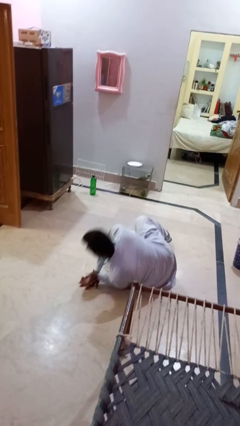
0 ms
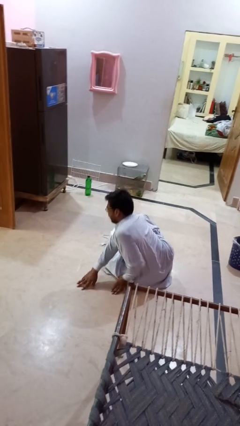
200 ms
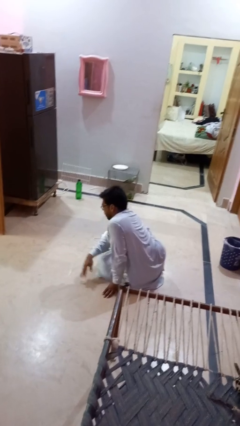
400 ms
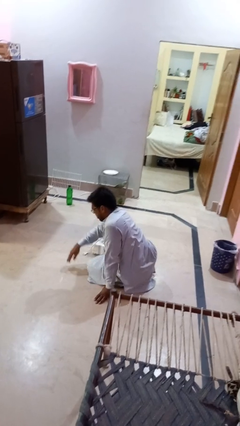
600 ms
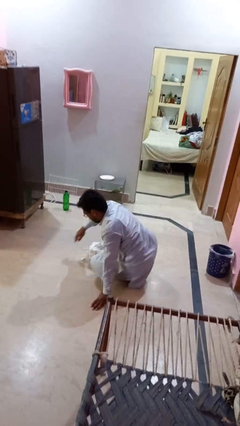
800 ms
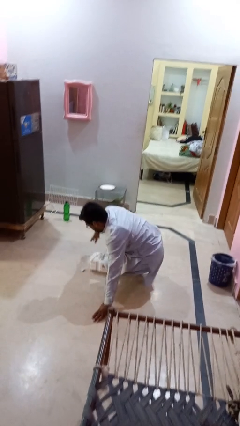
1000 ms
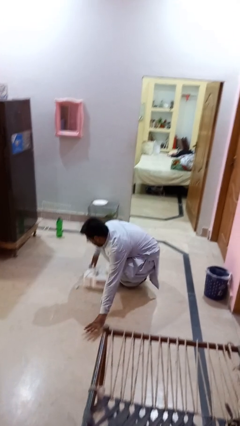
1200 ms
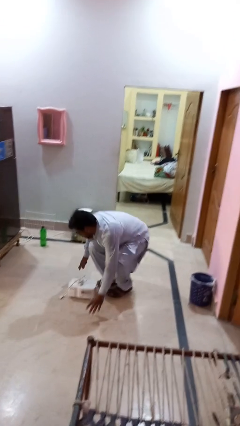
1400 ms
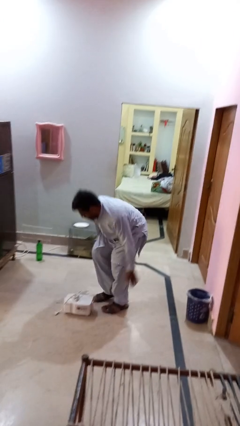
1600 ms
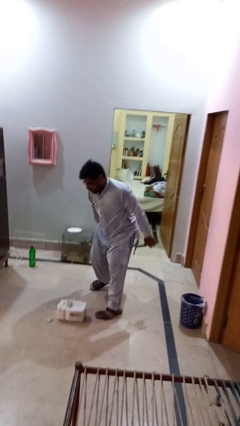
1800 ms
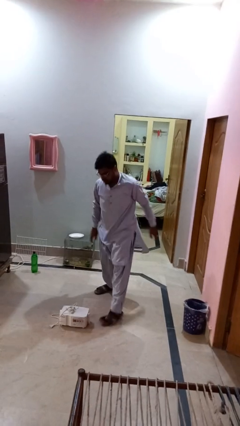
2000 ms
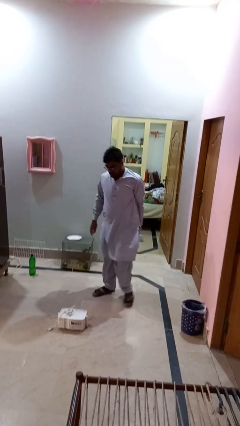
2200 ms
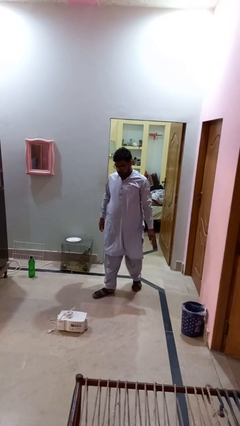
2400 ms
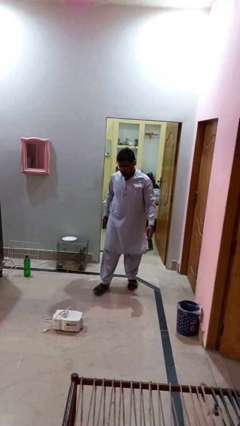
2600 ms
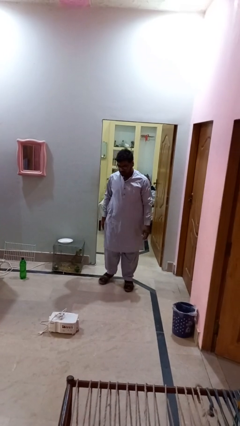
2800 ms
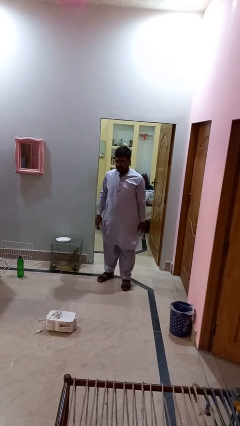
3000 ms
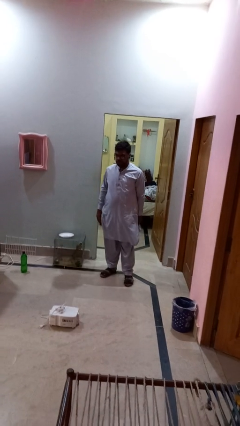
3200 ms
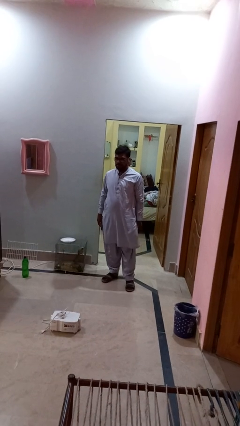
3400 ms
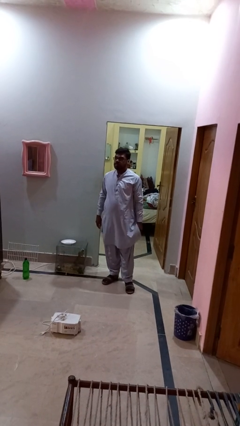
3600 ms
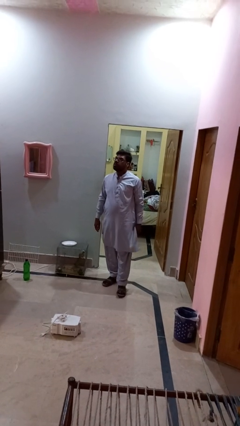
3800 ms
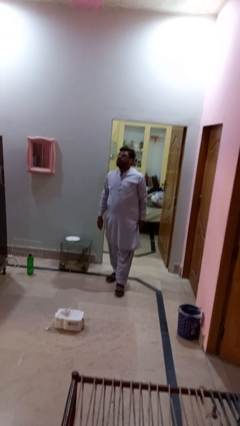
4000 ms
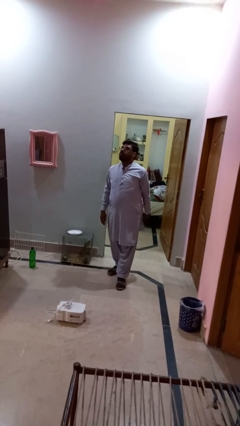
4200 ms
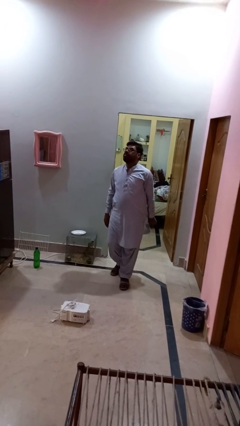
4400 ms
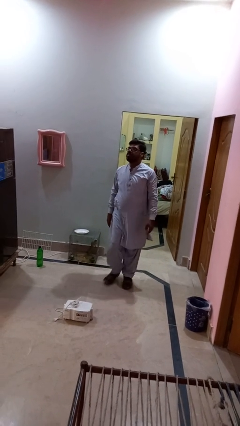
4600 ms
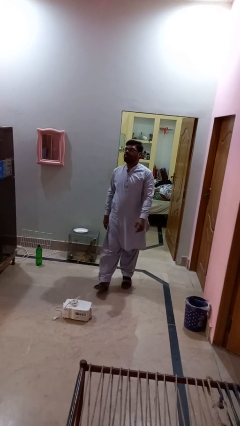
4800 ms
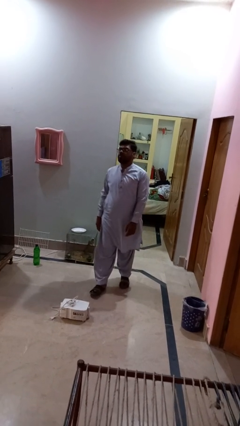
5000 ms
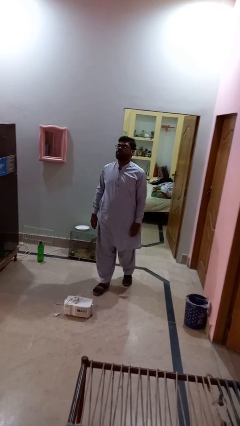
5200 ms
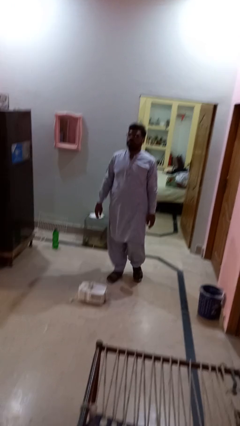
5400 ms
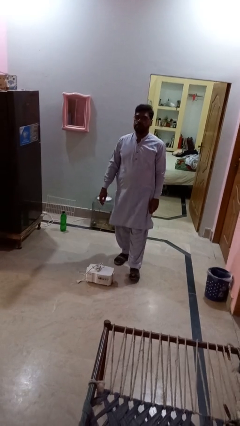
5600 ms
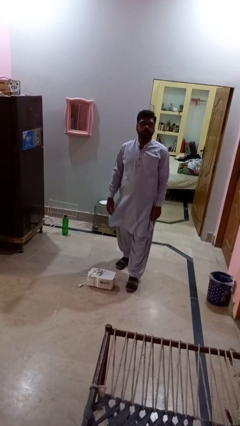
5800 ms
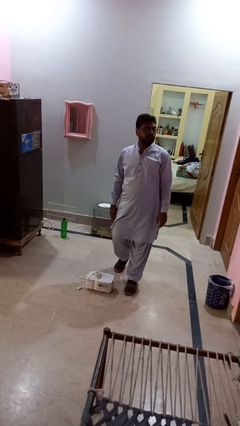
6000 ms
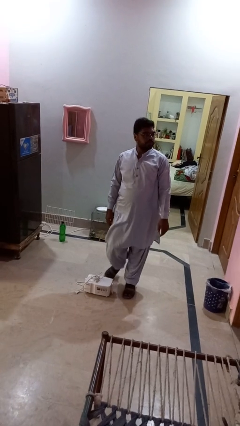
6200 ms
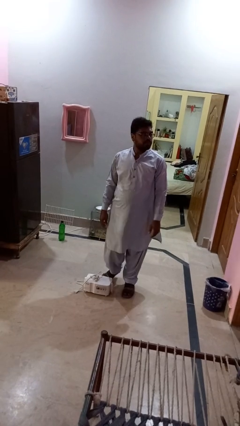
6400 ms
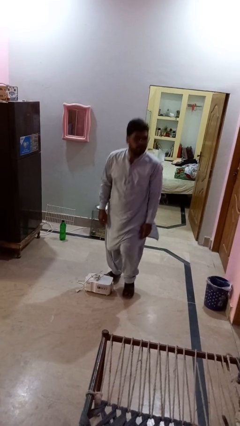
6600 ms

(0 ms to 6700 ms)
person stands up from floor

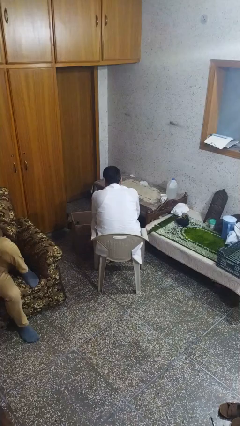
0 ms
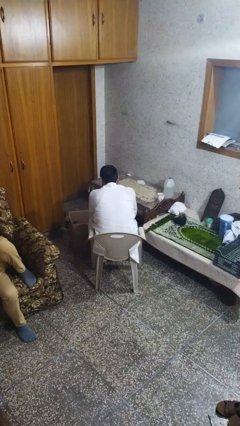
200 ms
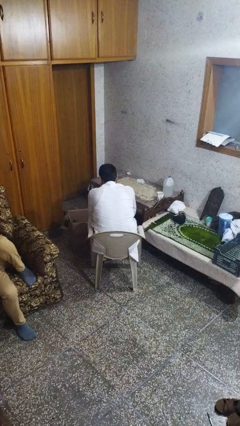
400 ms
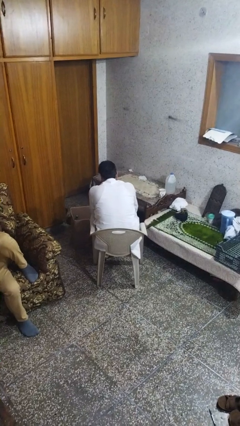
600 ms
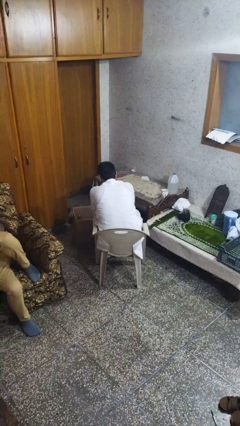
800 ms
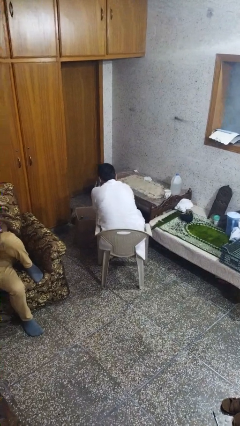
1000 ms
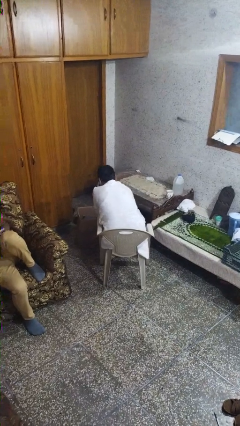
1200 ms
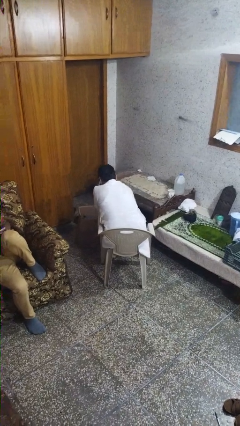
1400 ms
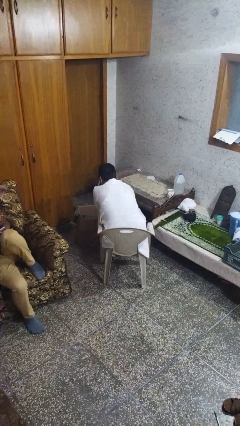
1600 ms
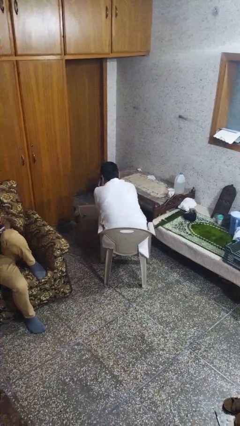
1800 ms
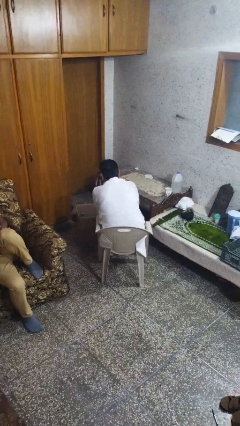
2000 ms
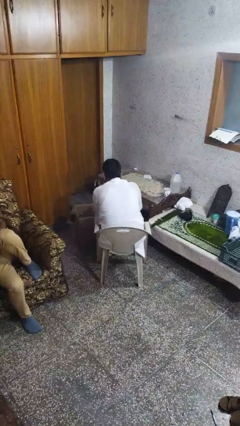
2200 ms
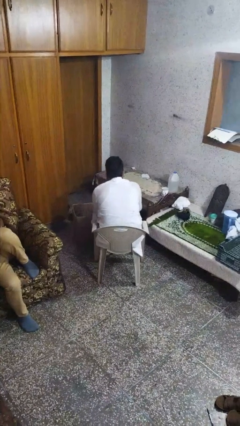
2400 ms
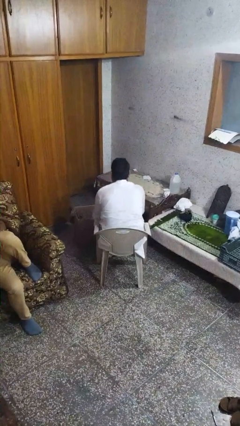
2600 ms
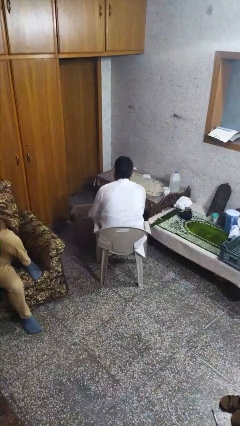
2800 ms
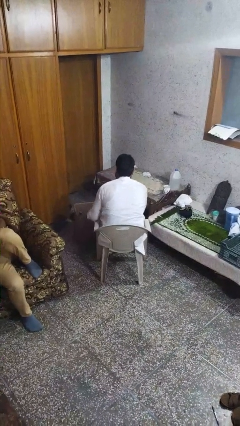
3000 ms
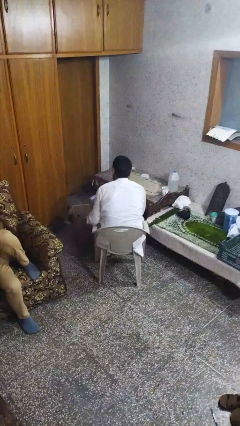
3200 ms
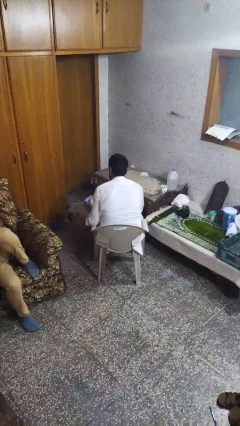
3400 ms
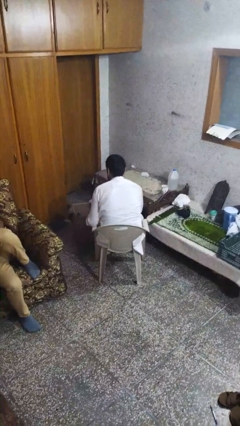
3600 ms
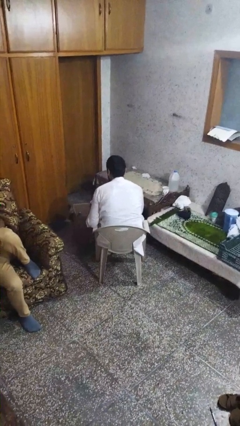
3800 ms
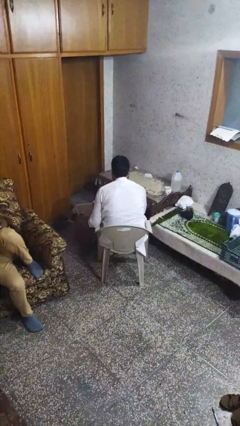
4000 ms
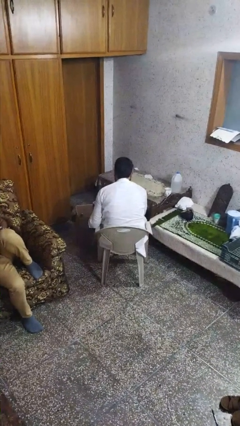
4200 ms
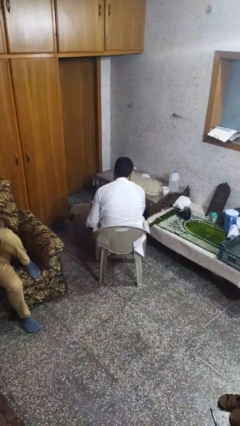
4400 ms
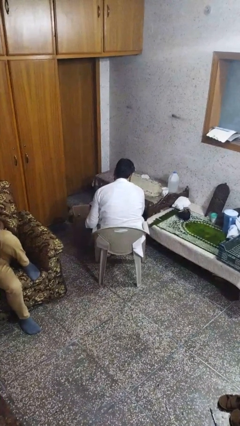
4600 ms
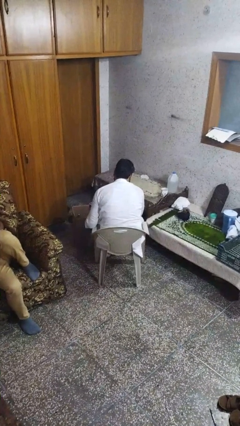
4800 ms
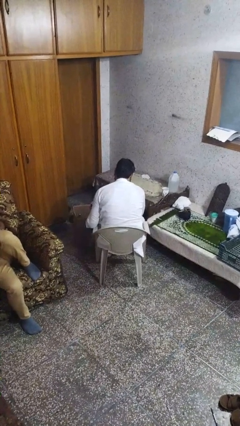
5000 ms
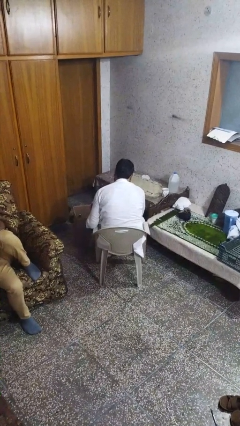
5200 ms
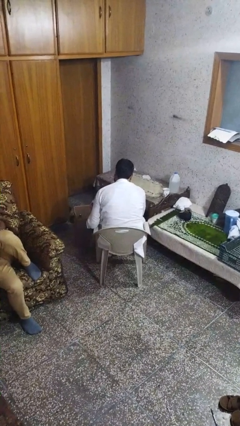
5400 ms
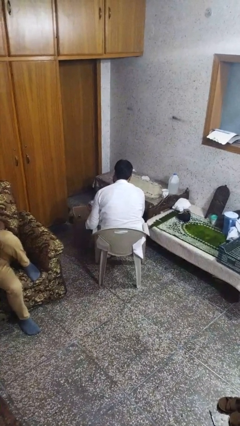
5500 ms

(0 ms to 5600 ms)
person takes object from box

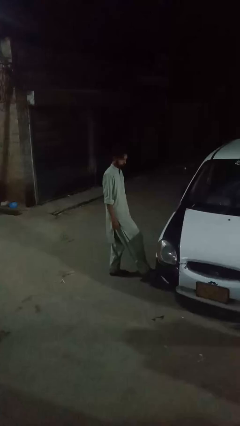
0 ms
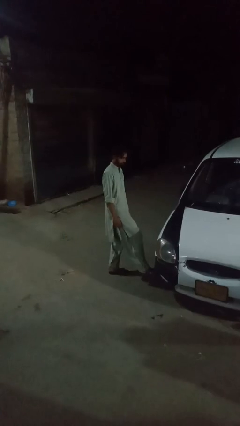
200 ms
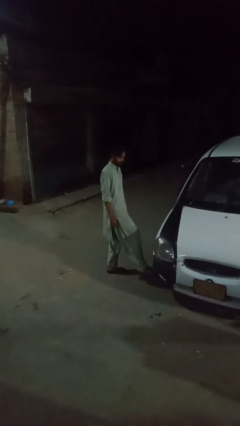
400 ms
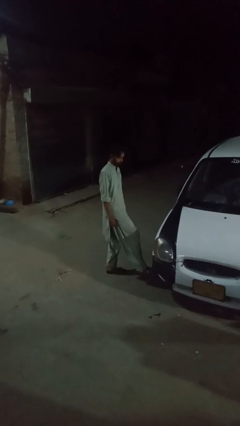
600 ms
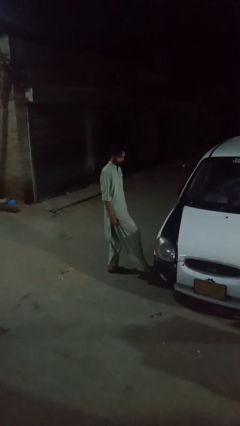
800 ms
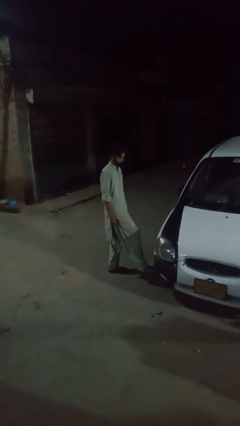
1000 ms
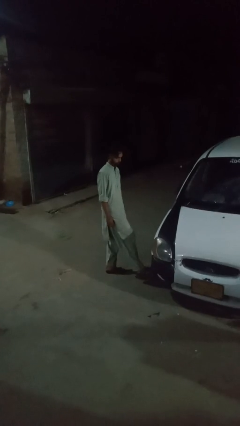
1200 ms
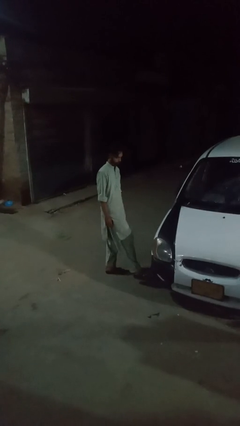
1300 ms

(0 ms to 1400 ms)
person kicks car tires

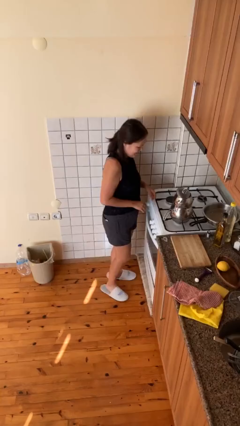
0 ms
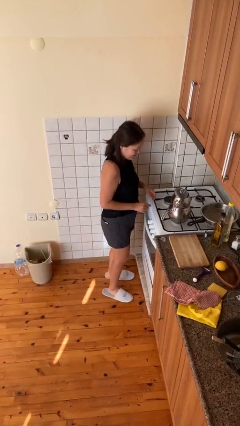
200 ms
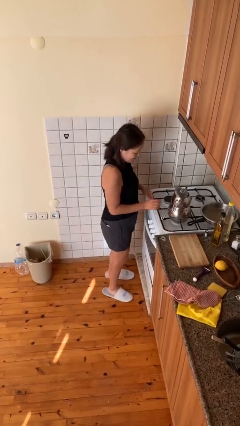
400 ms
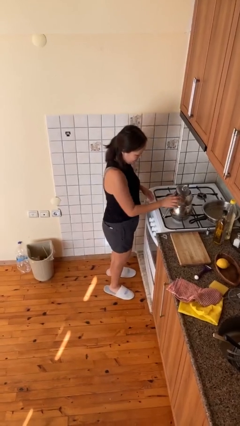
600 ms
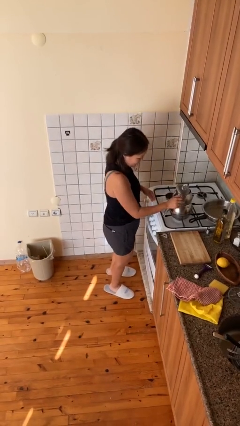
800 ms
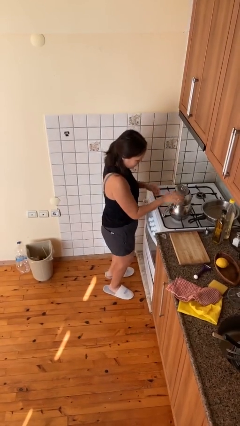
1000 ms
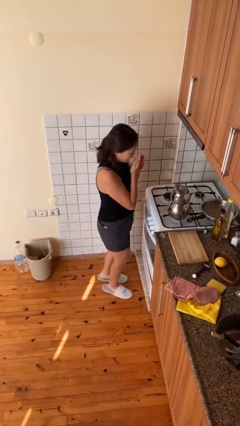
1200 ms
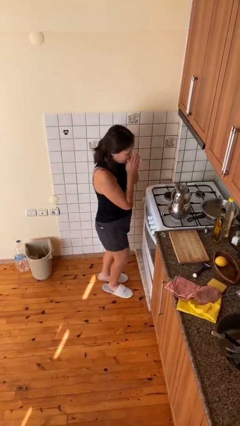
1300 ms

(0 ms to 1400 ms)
person burns hand

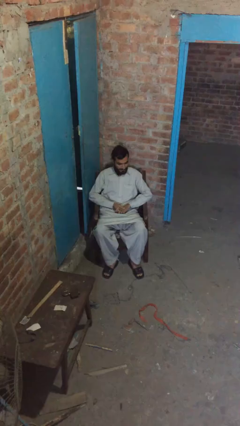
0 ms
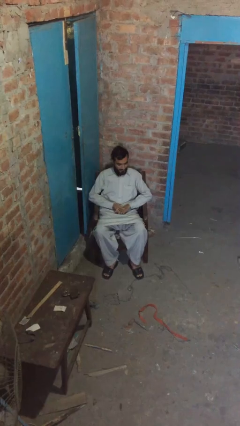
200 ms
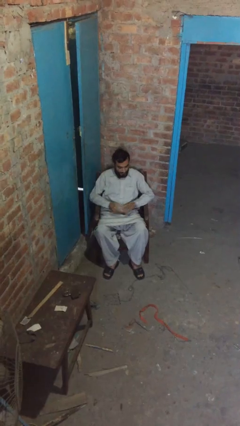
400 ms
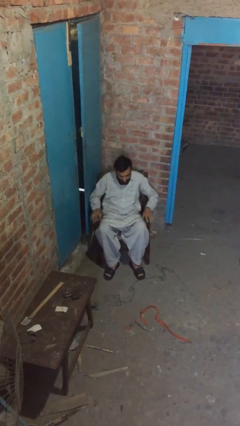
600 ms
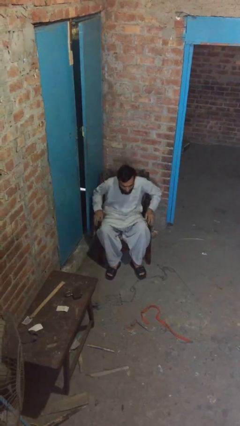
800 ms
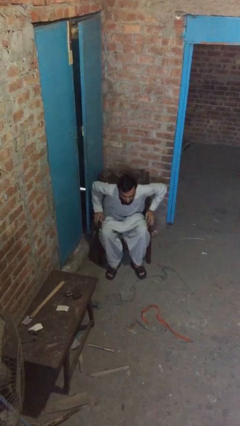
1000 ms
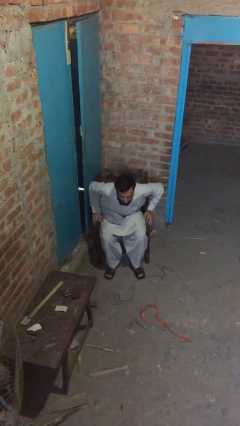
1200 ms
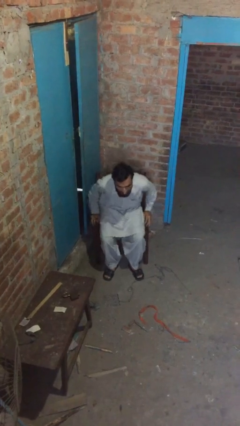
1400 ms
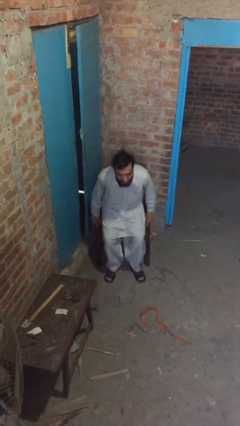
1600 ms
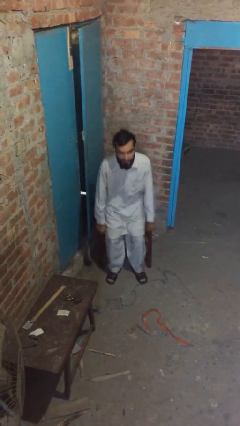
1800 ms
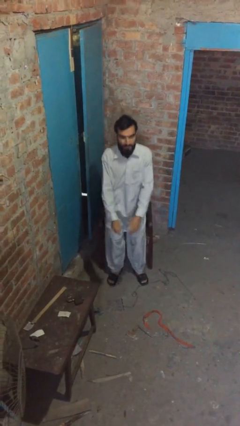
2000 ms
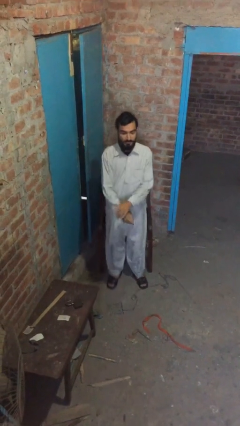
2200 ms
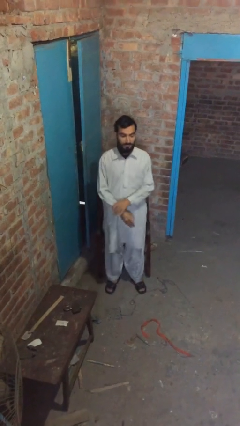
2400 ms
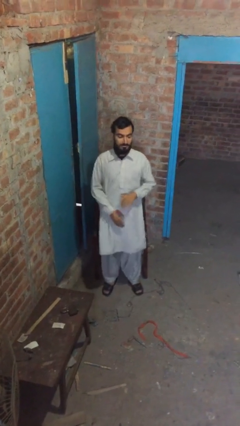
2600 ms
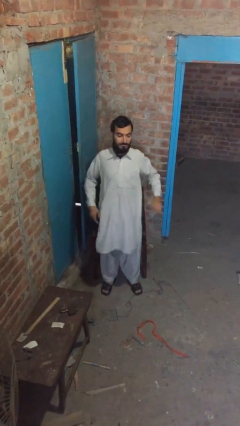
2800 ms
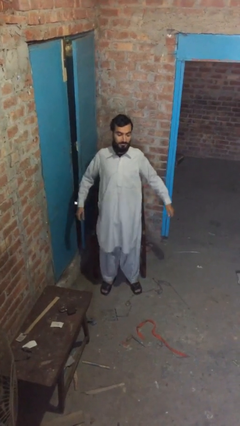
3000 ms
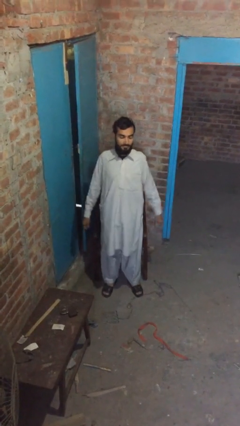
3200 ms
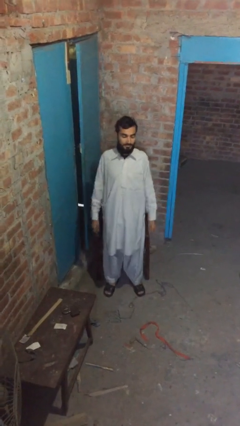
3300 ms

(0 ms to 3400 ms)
person stands up
